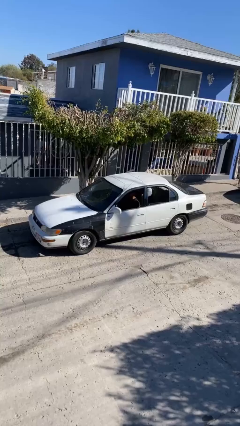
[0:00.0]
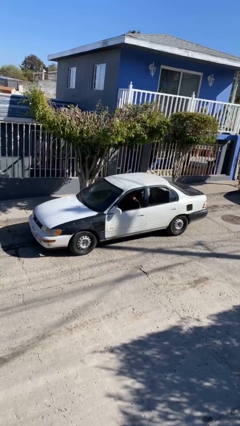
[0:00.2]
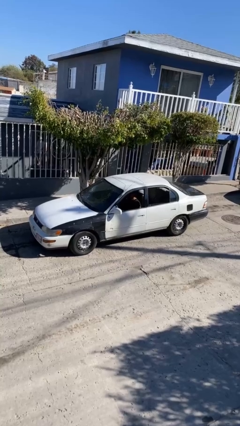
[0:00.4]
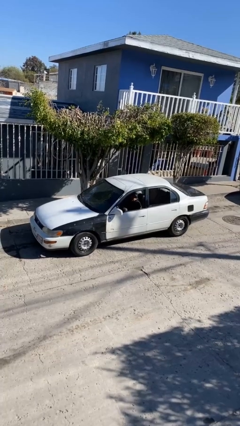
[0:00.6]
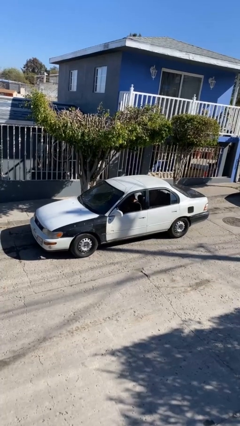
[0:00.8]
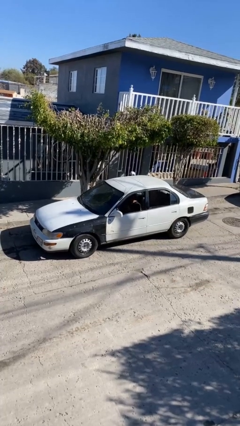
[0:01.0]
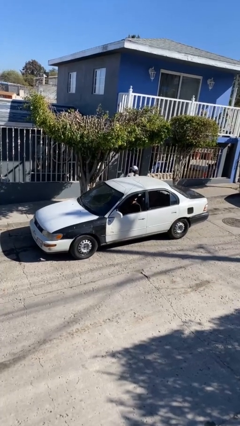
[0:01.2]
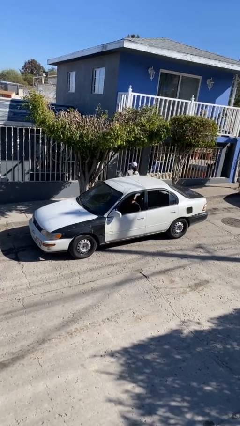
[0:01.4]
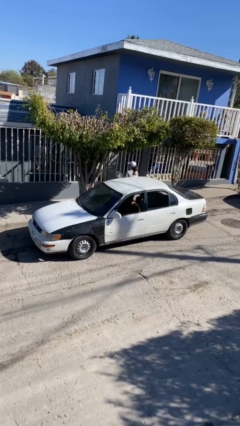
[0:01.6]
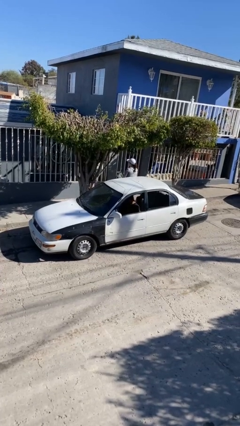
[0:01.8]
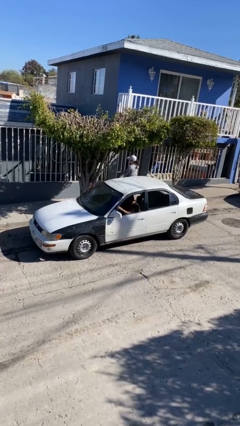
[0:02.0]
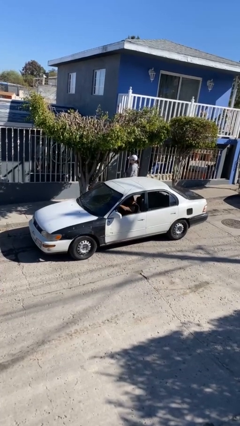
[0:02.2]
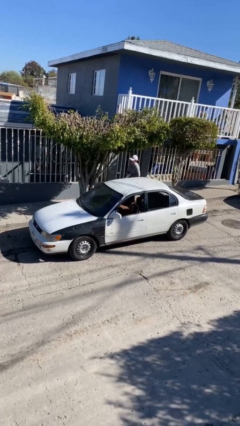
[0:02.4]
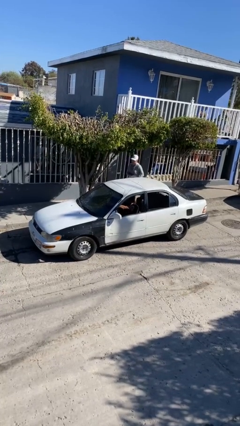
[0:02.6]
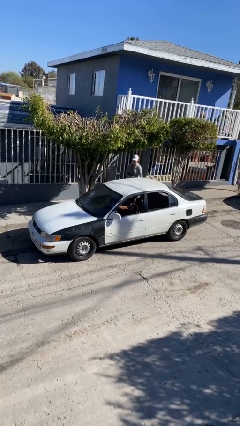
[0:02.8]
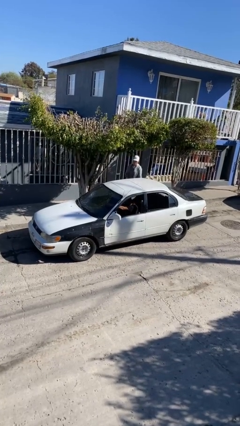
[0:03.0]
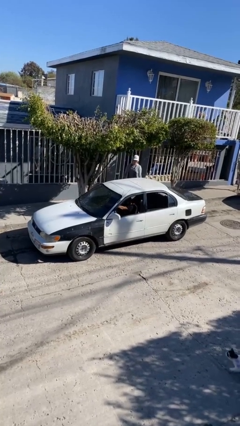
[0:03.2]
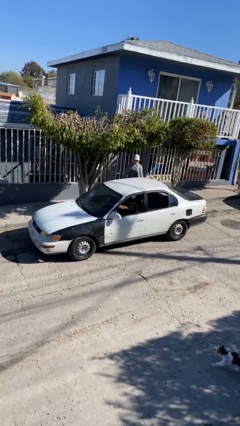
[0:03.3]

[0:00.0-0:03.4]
car drops off person

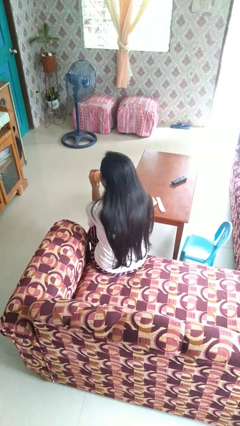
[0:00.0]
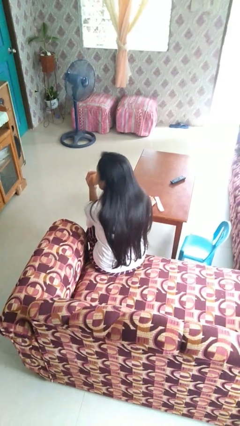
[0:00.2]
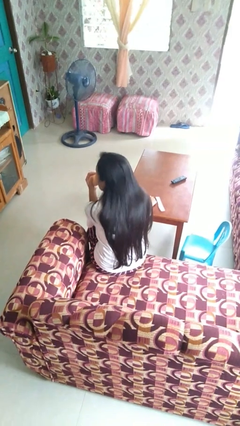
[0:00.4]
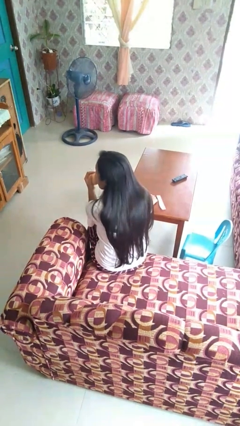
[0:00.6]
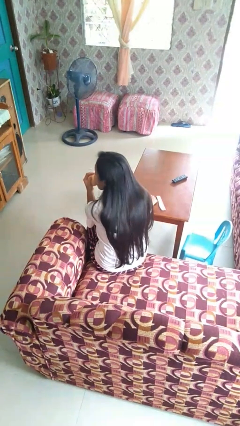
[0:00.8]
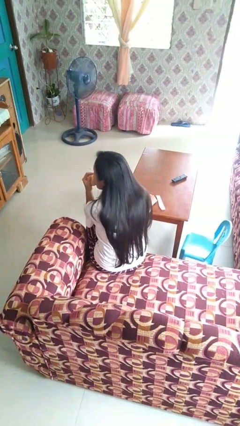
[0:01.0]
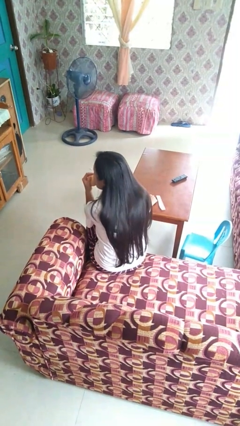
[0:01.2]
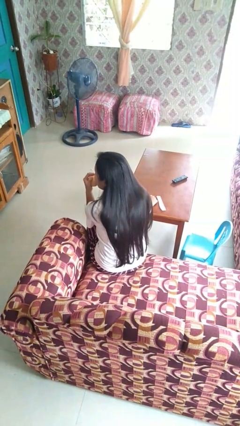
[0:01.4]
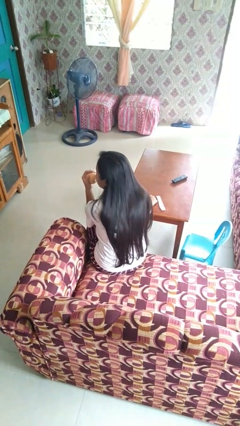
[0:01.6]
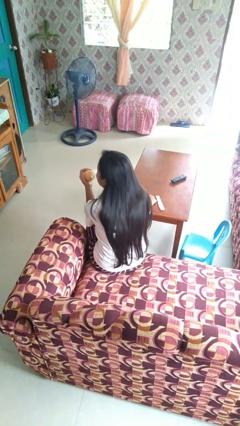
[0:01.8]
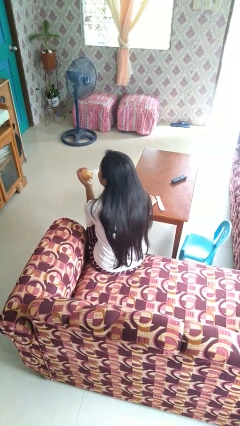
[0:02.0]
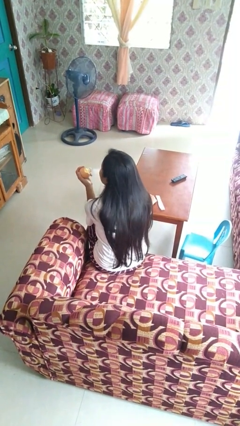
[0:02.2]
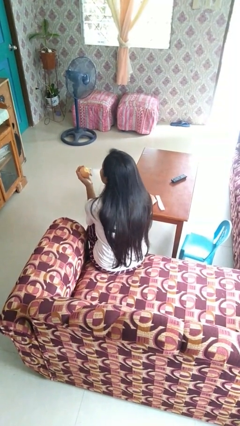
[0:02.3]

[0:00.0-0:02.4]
person eats apple

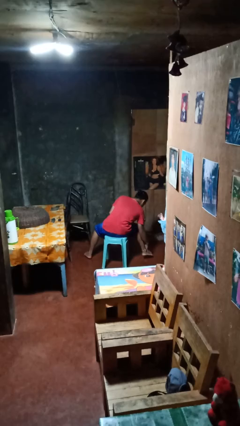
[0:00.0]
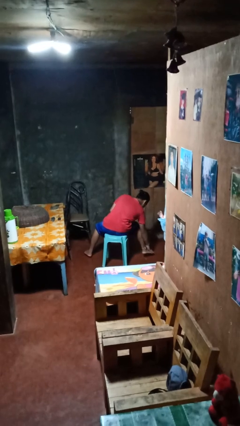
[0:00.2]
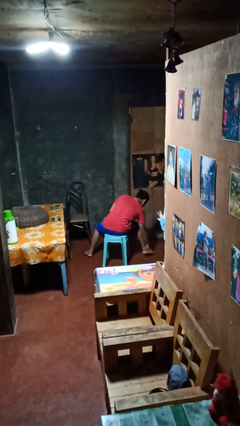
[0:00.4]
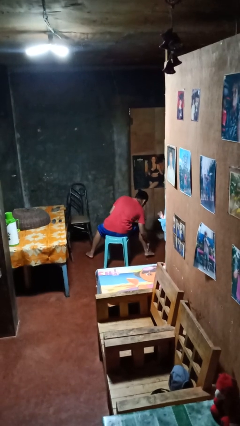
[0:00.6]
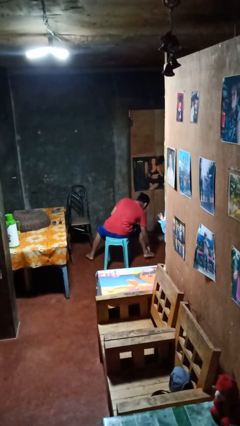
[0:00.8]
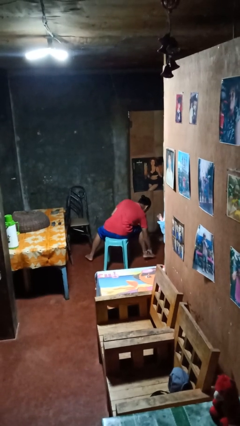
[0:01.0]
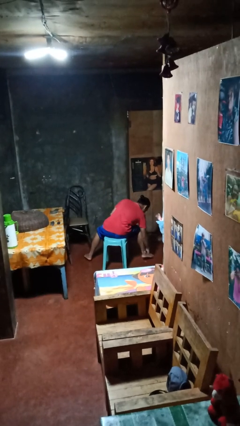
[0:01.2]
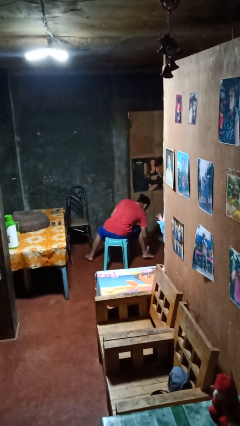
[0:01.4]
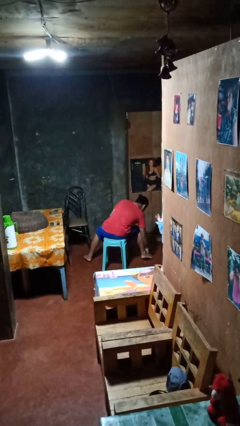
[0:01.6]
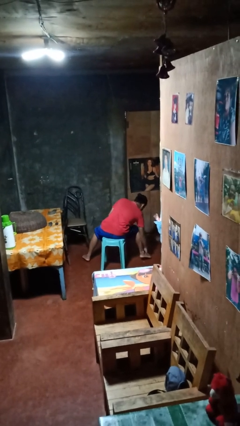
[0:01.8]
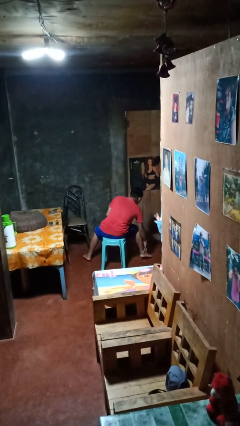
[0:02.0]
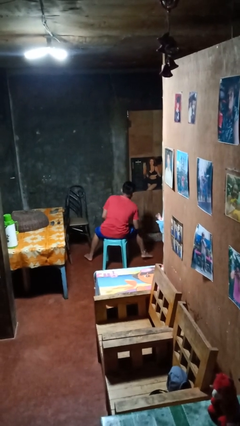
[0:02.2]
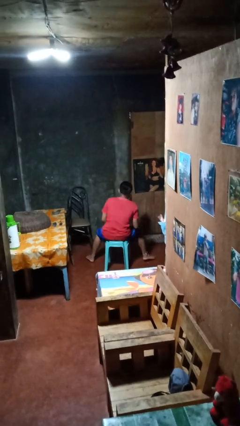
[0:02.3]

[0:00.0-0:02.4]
person rubs foot

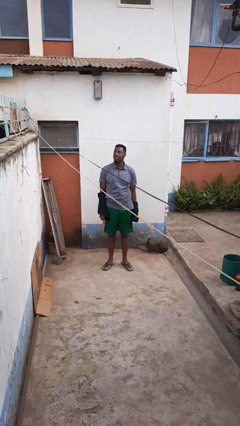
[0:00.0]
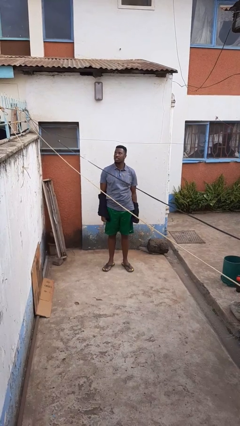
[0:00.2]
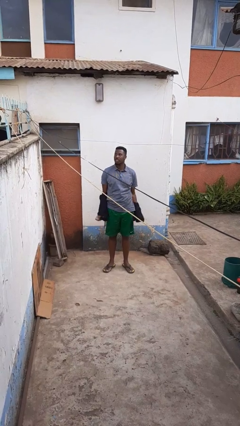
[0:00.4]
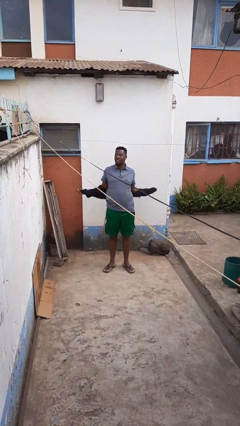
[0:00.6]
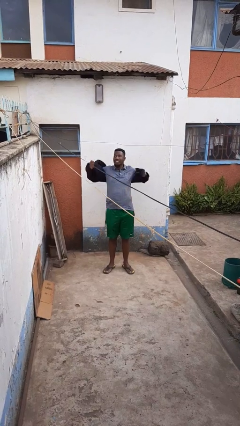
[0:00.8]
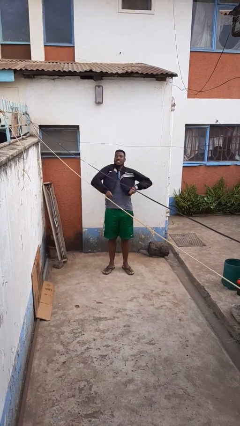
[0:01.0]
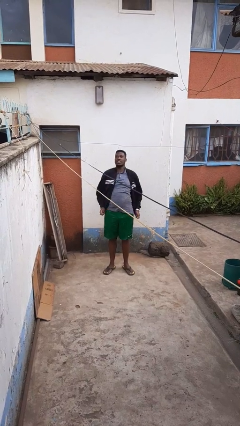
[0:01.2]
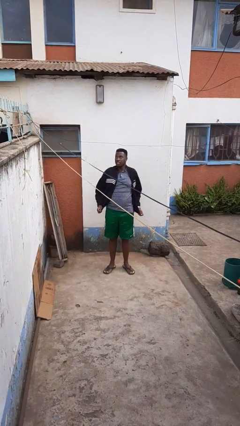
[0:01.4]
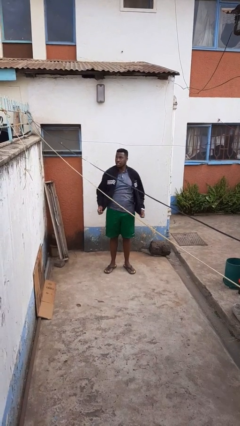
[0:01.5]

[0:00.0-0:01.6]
person puts on jacket

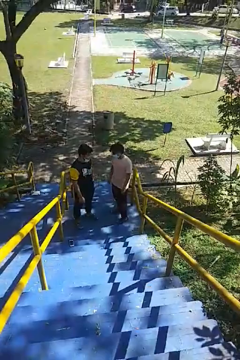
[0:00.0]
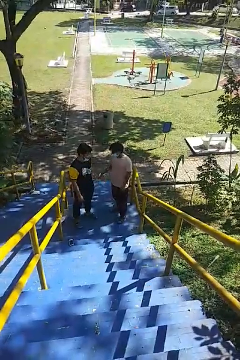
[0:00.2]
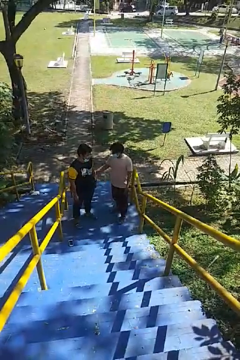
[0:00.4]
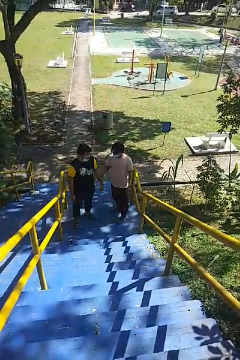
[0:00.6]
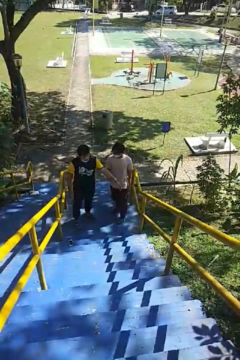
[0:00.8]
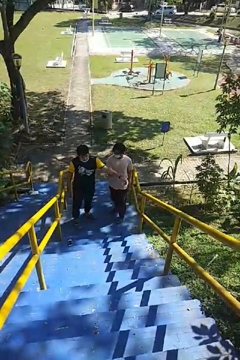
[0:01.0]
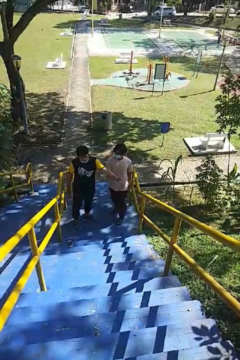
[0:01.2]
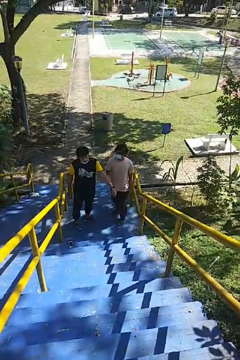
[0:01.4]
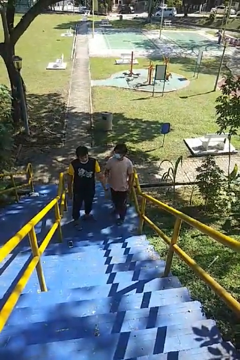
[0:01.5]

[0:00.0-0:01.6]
person grabs person by forearm

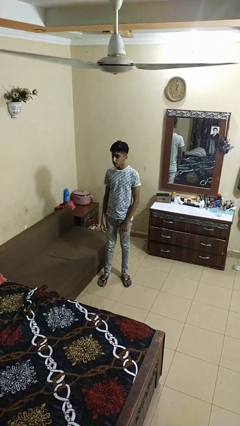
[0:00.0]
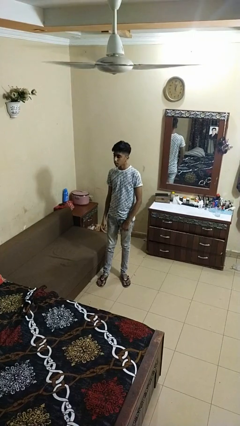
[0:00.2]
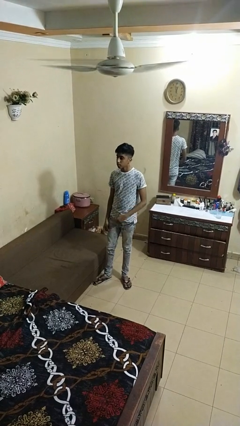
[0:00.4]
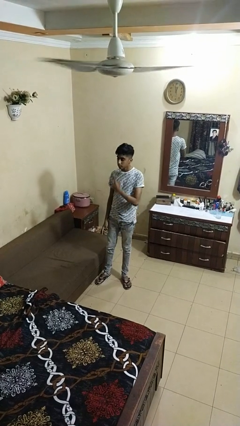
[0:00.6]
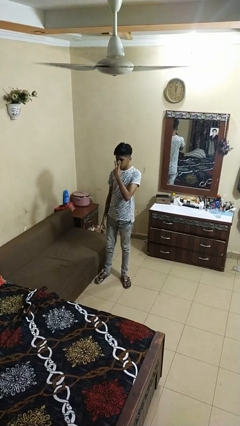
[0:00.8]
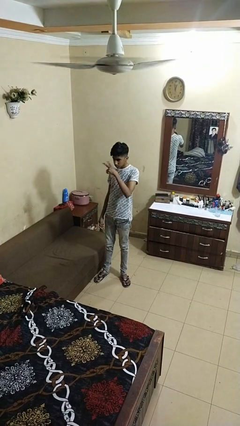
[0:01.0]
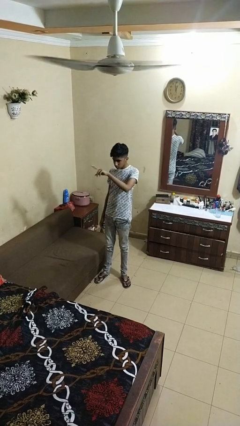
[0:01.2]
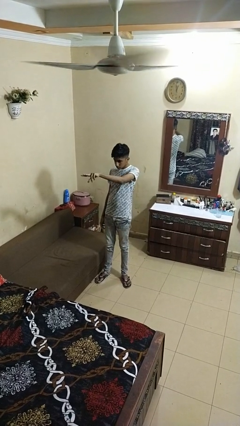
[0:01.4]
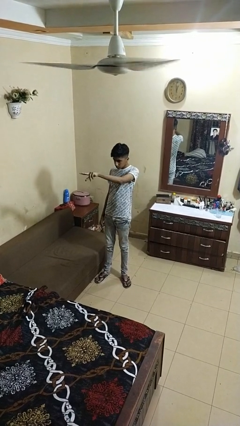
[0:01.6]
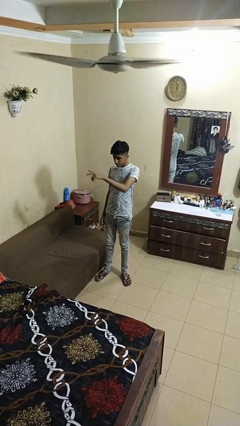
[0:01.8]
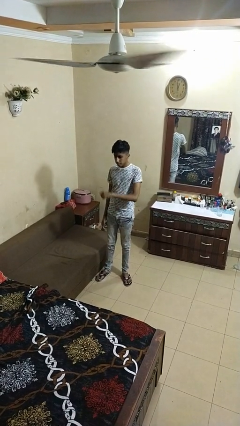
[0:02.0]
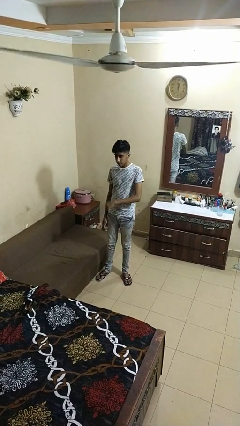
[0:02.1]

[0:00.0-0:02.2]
person gestures watch closely

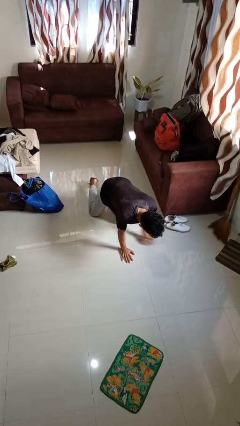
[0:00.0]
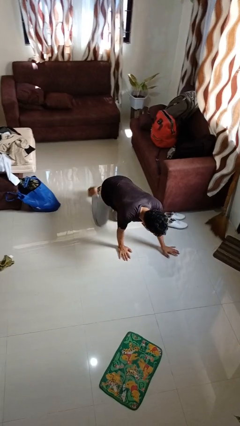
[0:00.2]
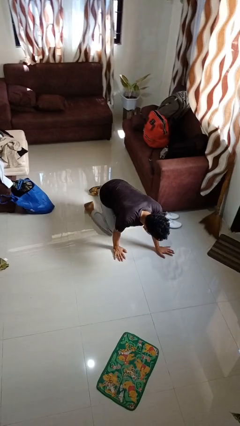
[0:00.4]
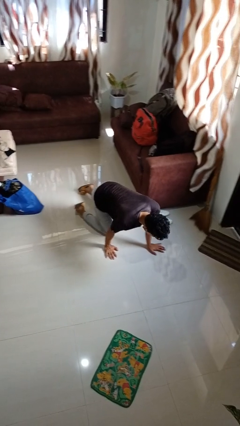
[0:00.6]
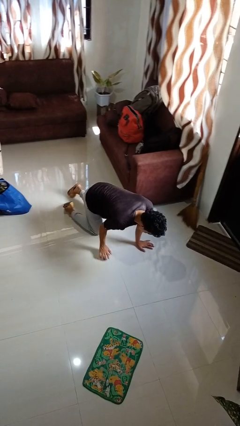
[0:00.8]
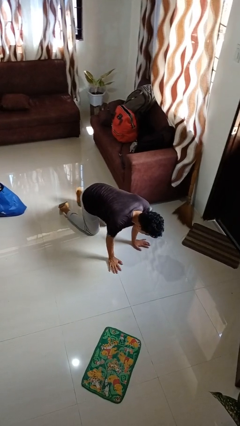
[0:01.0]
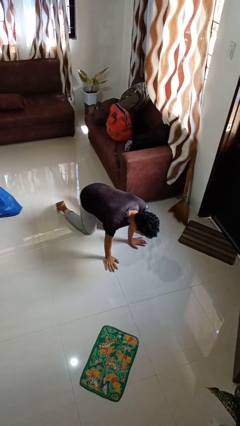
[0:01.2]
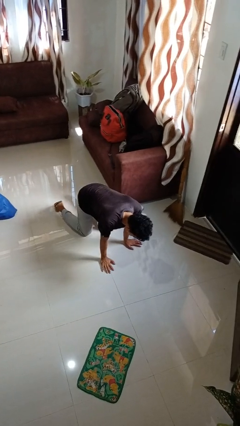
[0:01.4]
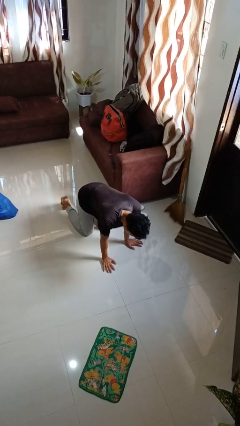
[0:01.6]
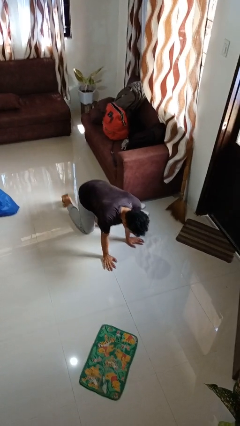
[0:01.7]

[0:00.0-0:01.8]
person crawls

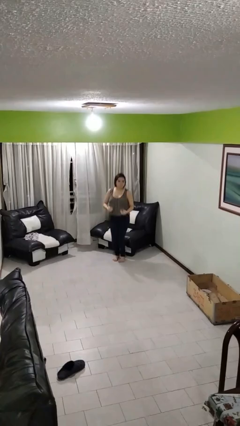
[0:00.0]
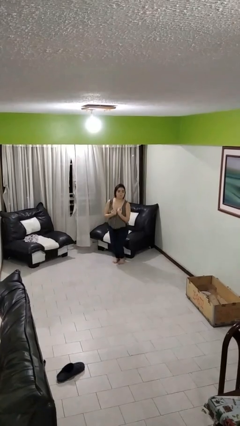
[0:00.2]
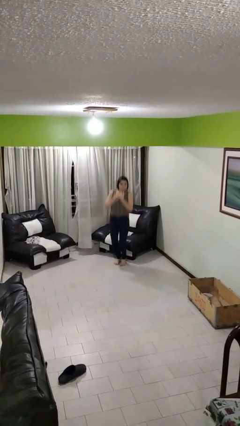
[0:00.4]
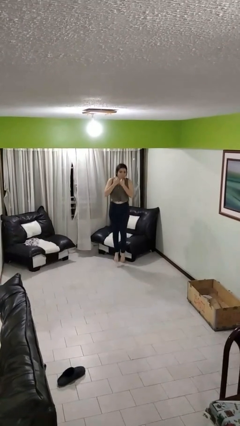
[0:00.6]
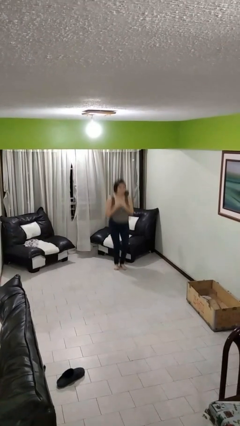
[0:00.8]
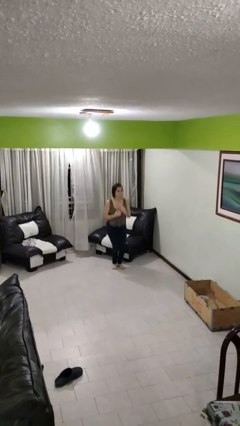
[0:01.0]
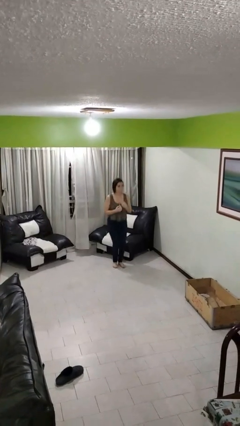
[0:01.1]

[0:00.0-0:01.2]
person jumps

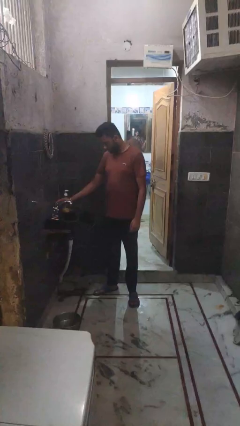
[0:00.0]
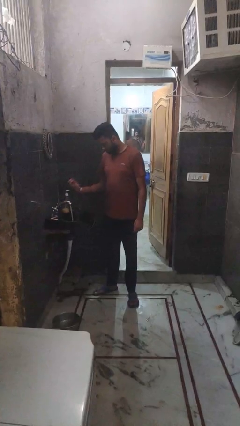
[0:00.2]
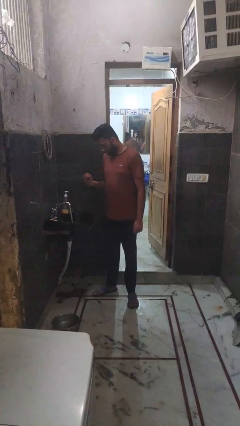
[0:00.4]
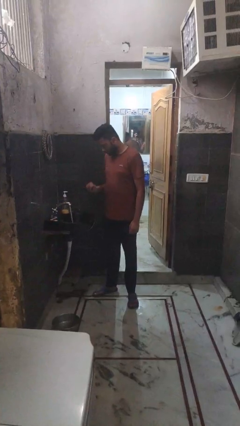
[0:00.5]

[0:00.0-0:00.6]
person turns on faucet

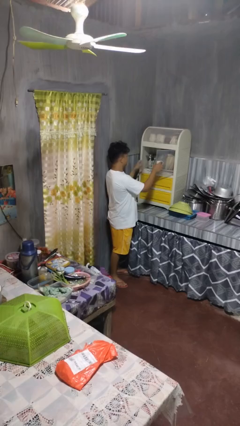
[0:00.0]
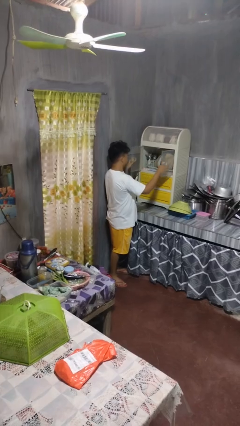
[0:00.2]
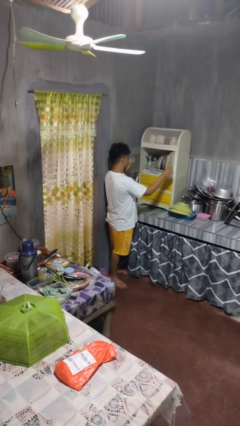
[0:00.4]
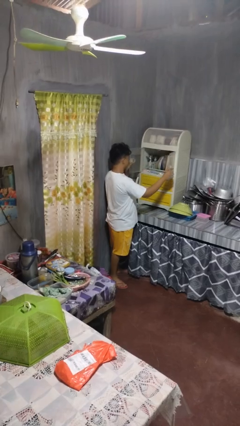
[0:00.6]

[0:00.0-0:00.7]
person opens cabinet
